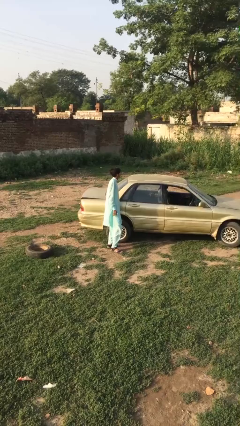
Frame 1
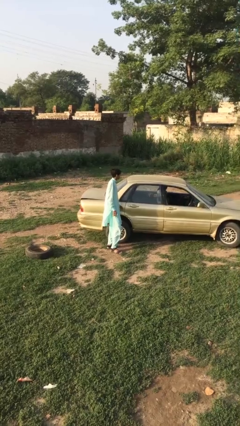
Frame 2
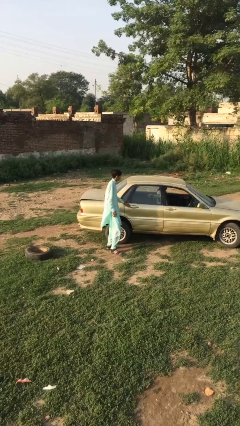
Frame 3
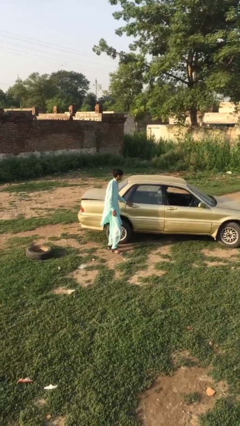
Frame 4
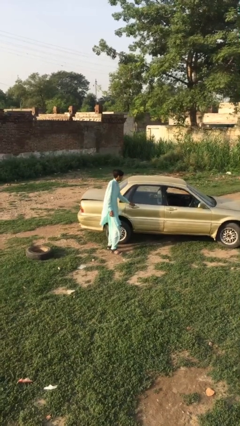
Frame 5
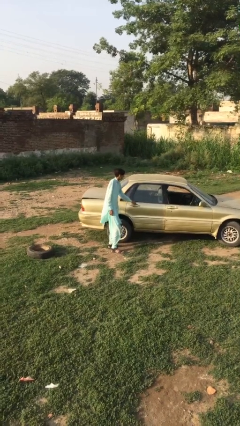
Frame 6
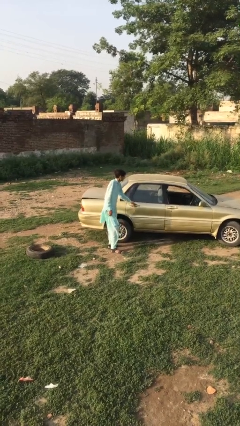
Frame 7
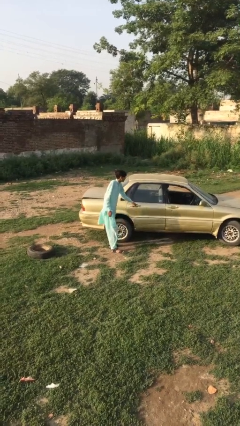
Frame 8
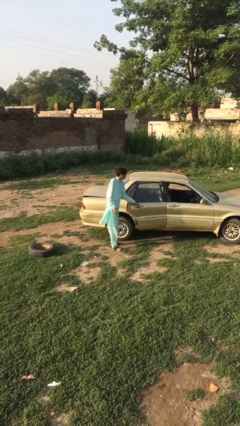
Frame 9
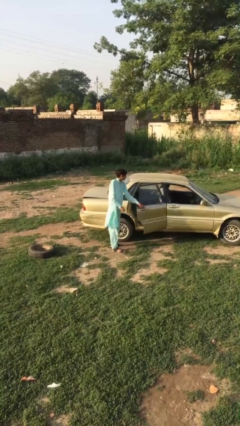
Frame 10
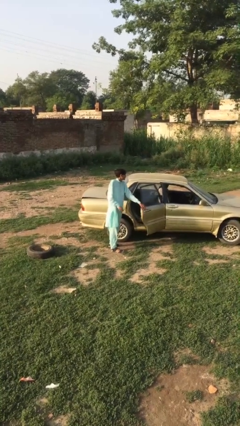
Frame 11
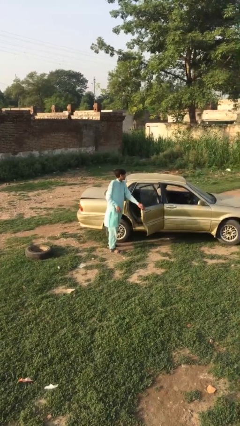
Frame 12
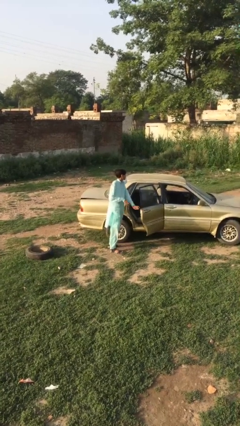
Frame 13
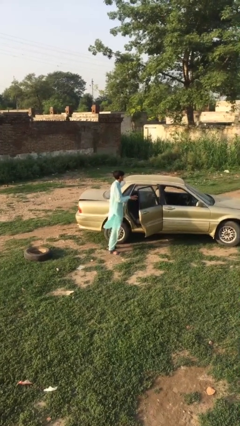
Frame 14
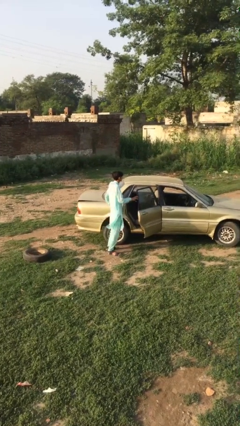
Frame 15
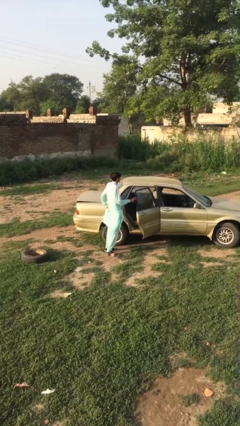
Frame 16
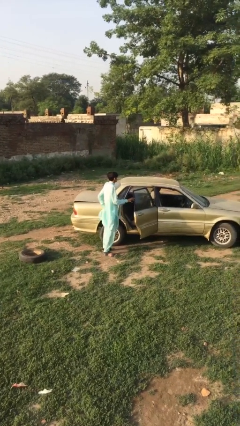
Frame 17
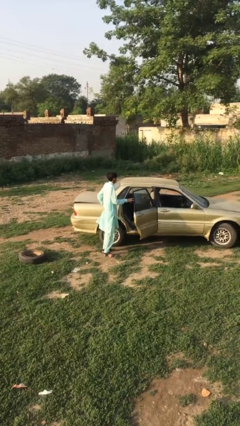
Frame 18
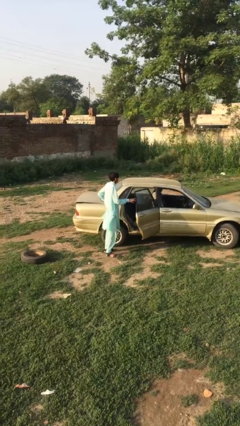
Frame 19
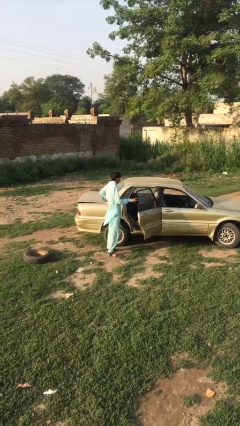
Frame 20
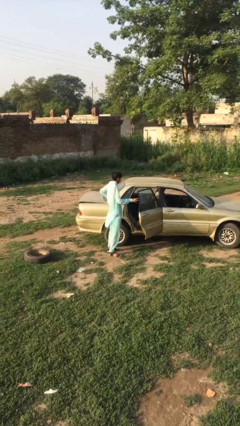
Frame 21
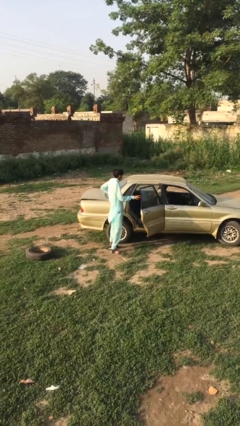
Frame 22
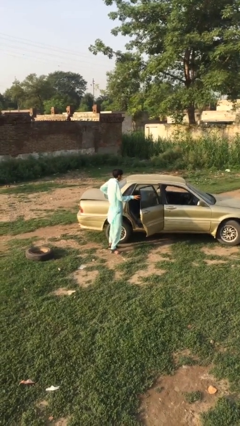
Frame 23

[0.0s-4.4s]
person opens car door

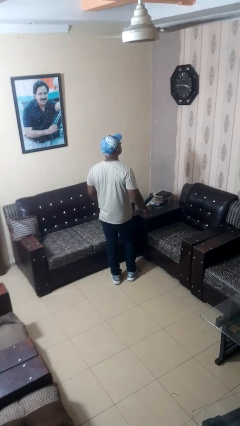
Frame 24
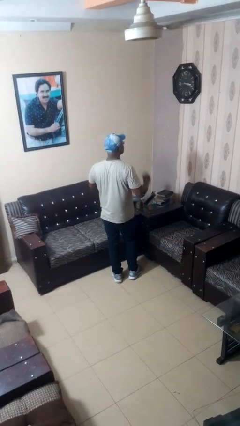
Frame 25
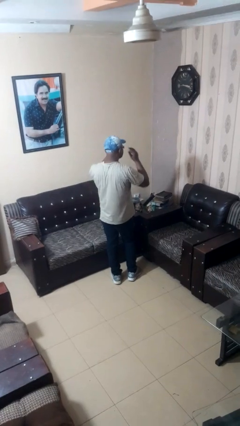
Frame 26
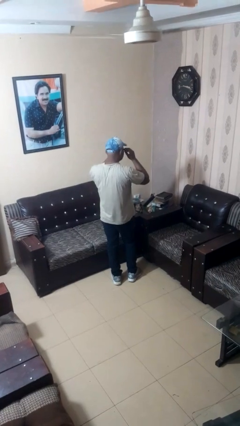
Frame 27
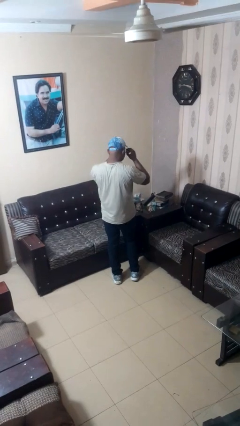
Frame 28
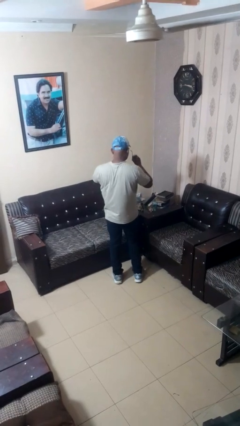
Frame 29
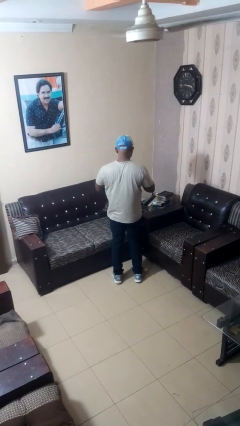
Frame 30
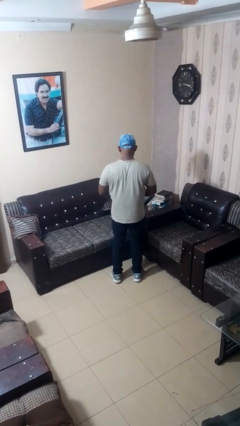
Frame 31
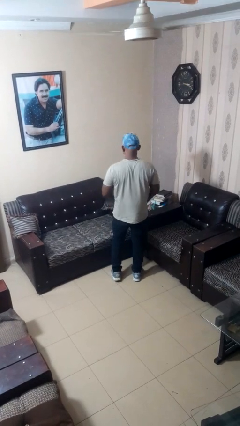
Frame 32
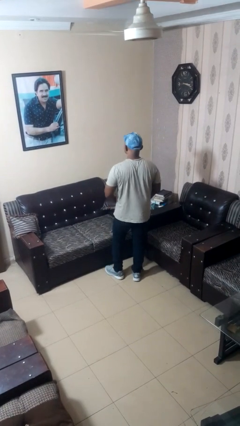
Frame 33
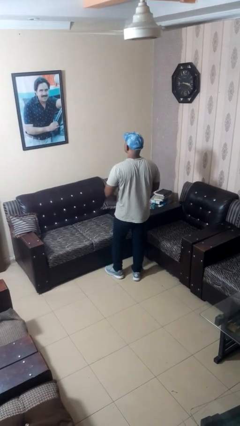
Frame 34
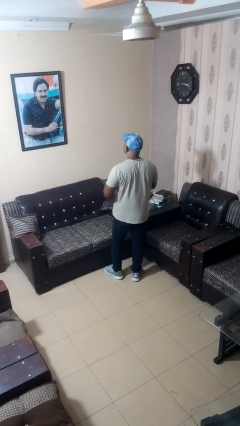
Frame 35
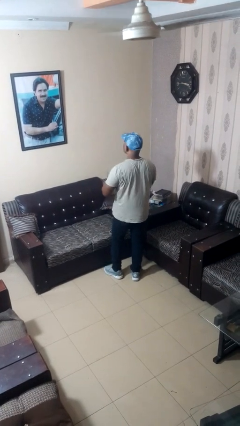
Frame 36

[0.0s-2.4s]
person takes off glasses

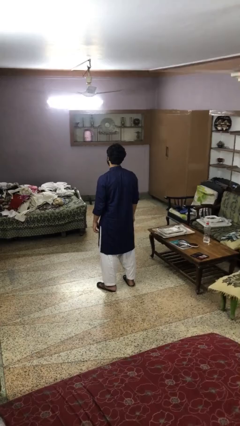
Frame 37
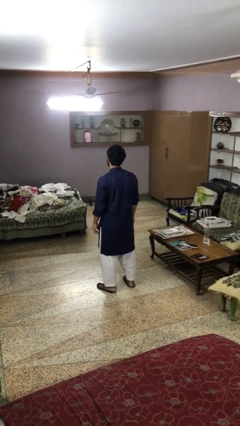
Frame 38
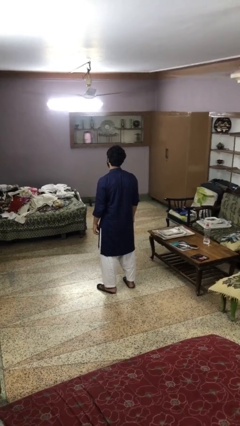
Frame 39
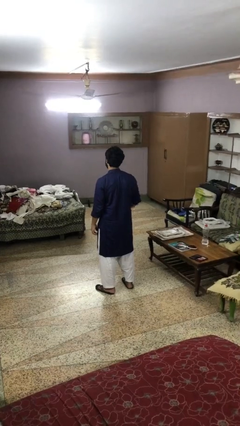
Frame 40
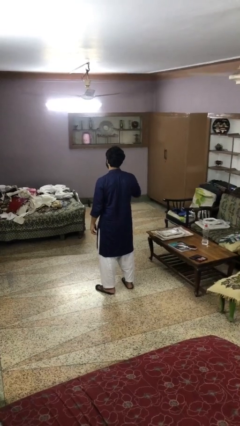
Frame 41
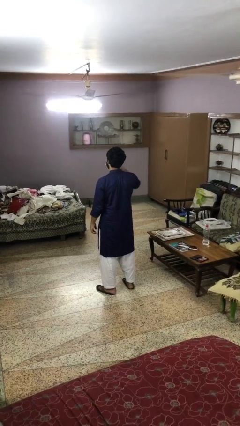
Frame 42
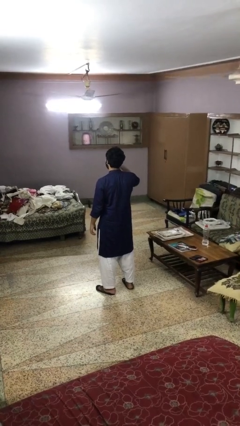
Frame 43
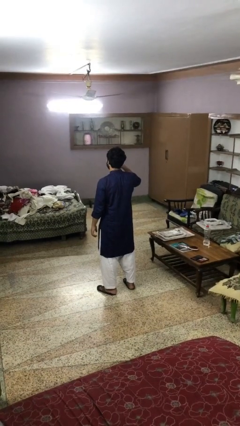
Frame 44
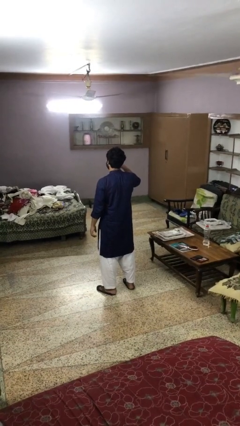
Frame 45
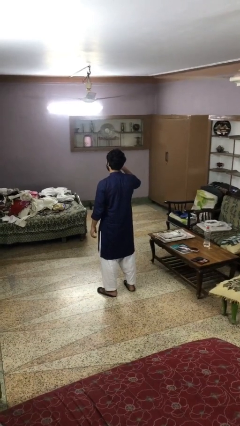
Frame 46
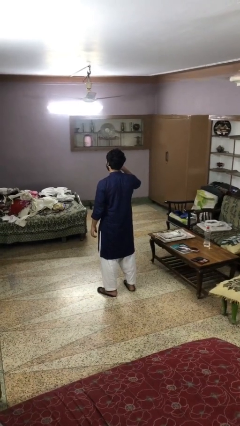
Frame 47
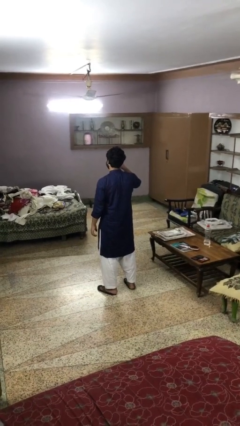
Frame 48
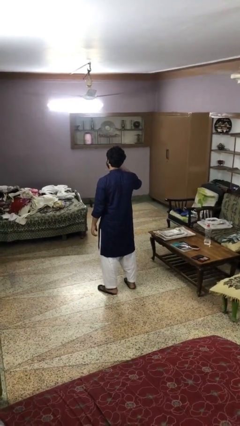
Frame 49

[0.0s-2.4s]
person brushes teeth

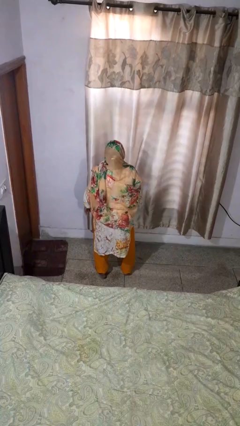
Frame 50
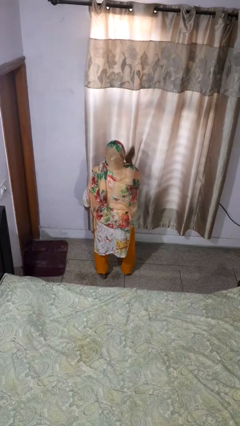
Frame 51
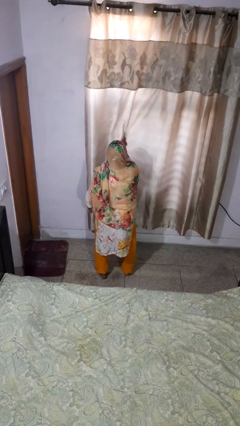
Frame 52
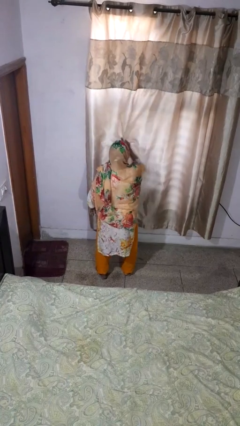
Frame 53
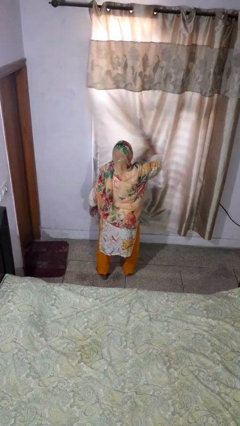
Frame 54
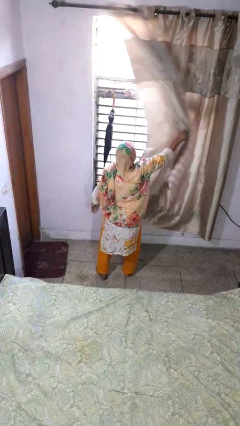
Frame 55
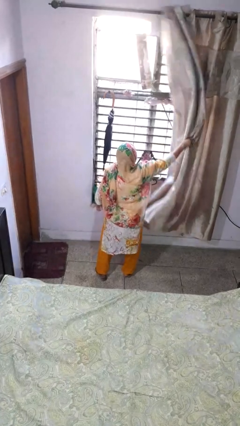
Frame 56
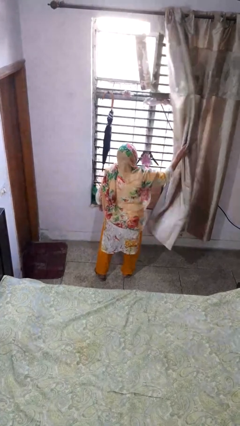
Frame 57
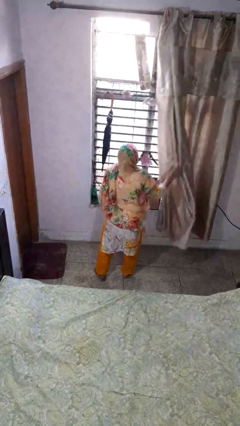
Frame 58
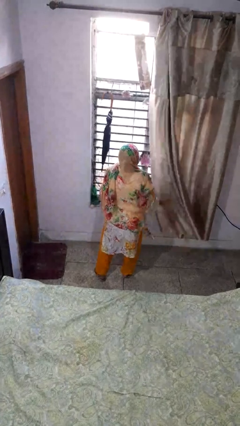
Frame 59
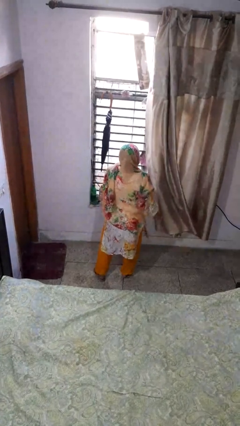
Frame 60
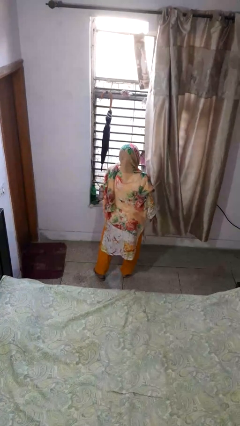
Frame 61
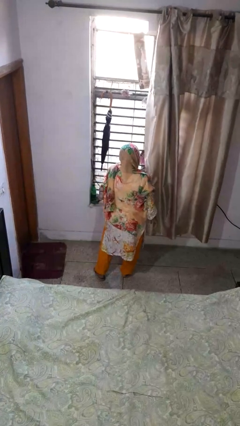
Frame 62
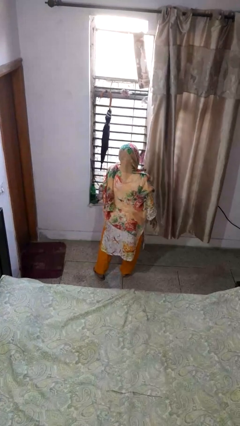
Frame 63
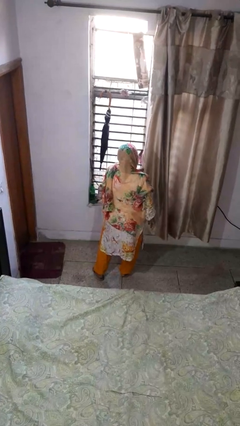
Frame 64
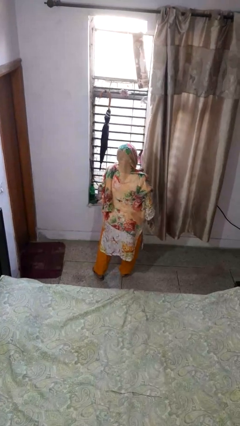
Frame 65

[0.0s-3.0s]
person opens curtains

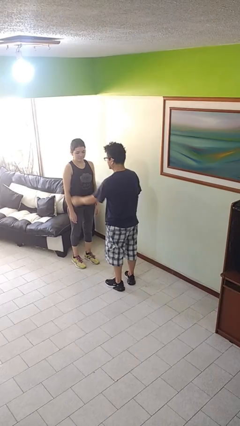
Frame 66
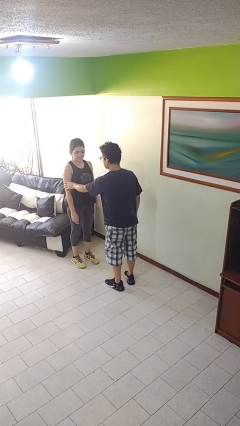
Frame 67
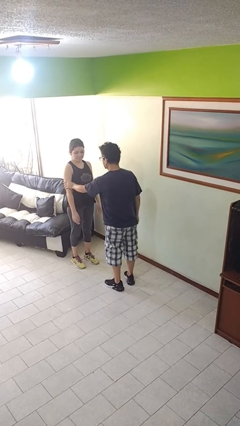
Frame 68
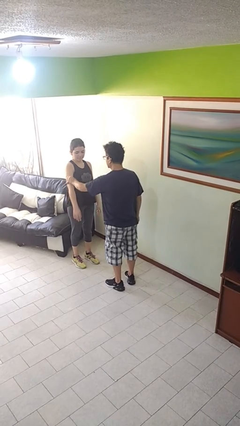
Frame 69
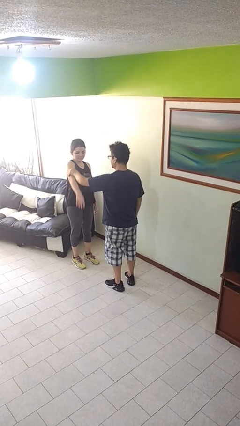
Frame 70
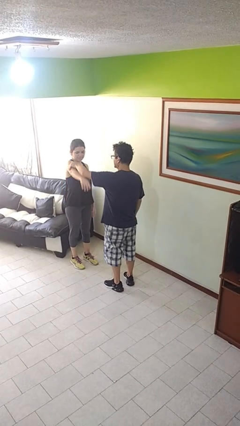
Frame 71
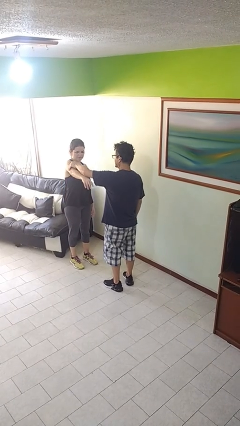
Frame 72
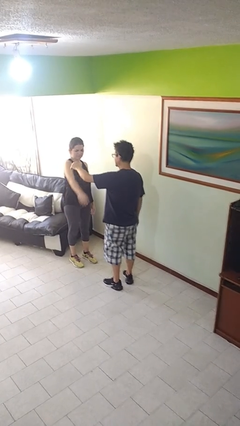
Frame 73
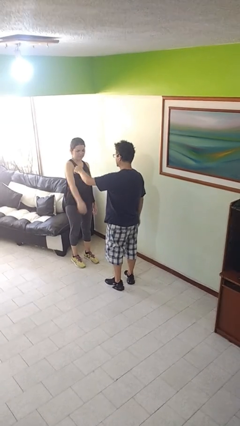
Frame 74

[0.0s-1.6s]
person grabs person by bicep

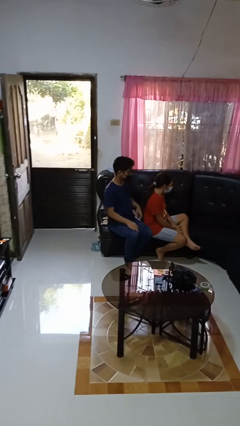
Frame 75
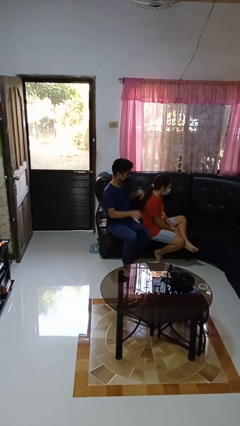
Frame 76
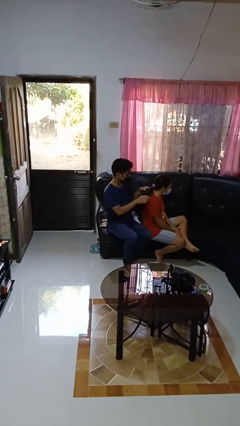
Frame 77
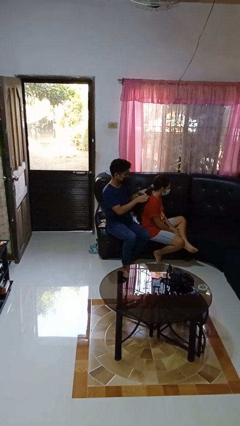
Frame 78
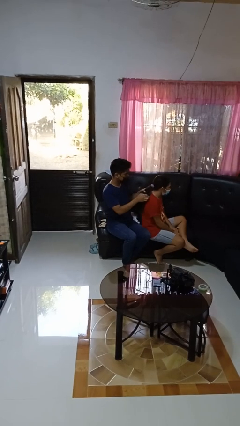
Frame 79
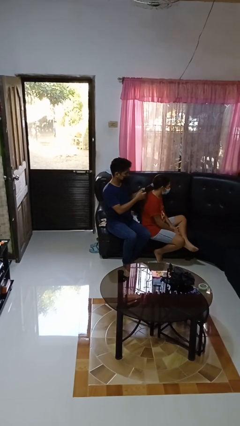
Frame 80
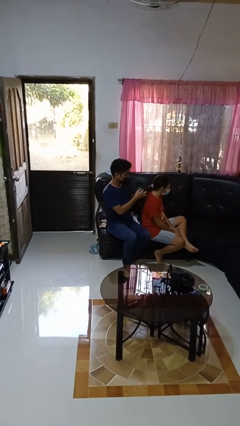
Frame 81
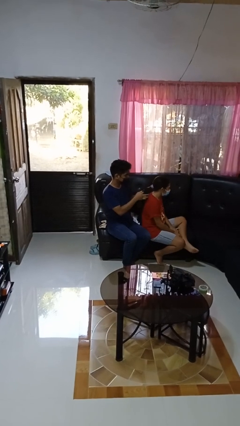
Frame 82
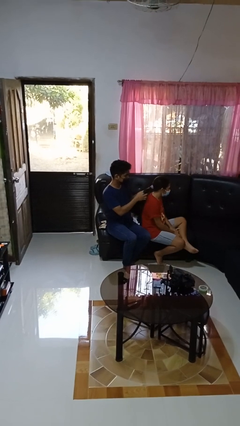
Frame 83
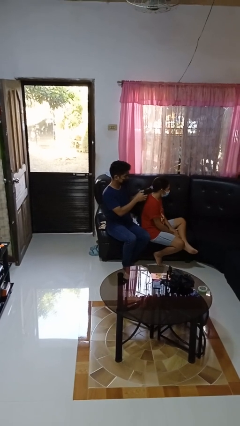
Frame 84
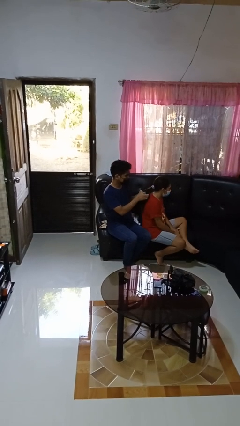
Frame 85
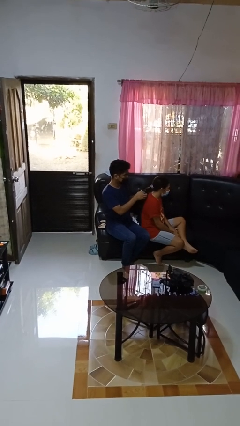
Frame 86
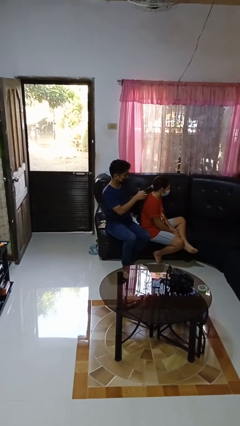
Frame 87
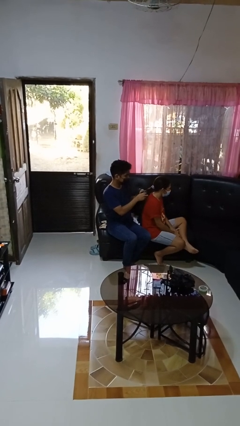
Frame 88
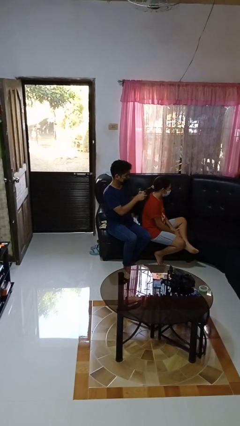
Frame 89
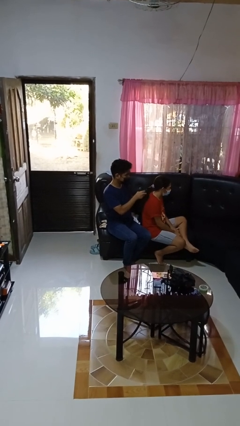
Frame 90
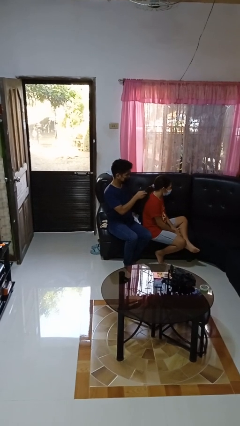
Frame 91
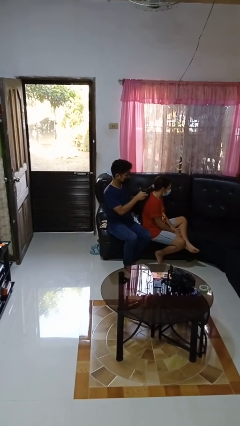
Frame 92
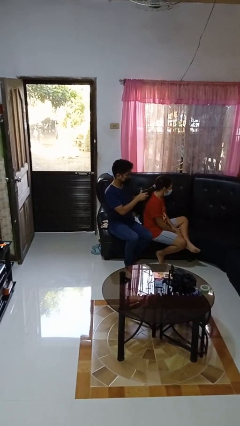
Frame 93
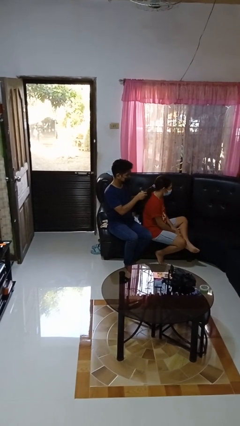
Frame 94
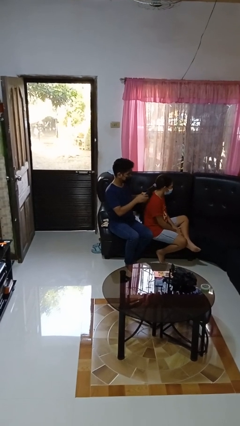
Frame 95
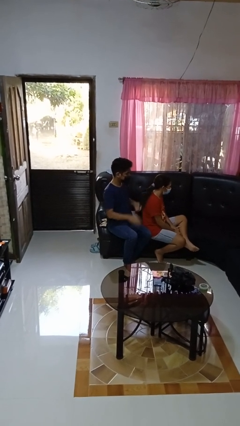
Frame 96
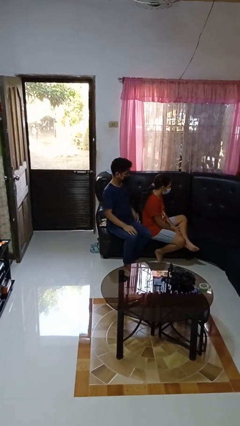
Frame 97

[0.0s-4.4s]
person braids hair of person
